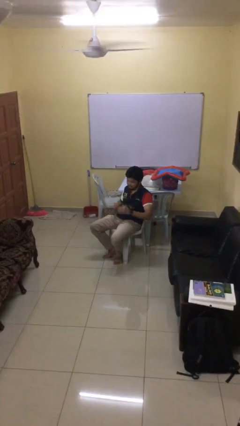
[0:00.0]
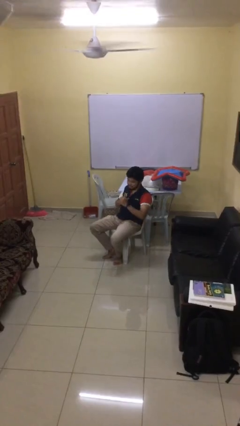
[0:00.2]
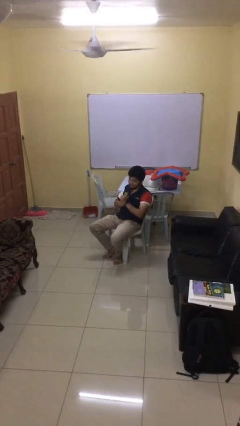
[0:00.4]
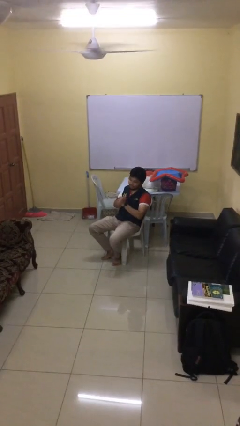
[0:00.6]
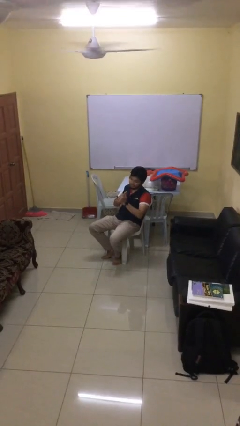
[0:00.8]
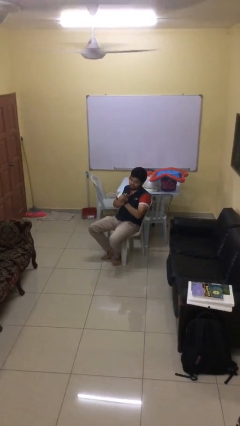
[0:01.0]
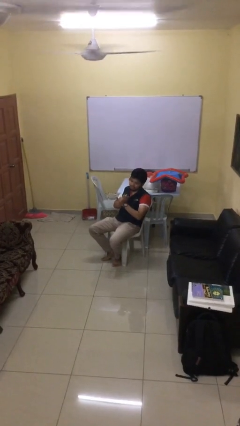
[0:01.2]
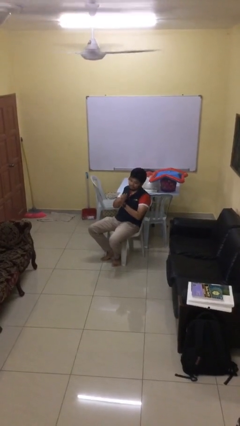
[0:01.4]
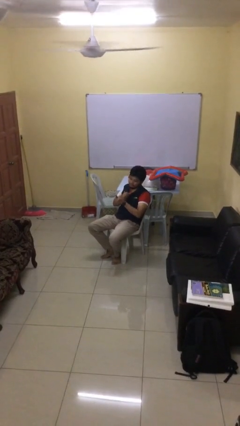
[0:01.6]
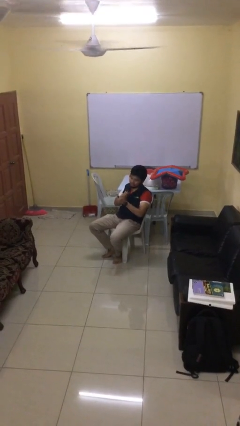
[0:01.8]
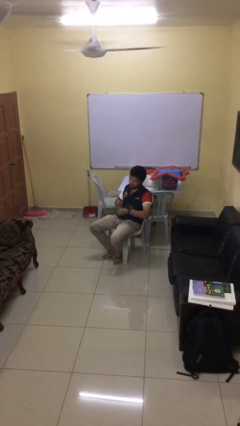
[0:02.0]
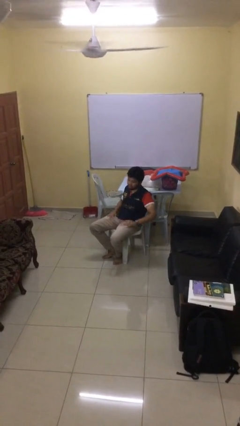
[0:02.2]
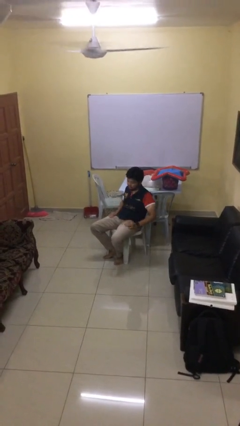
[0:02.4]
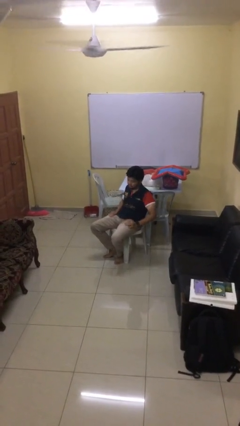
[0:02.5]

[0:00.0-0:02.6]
person cracks knuckles

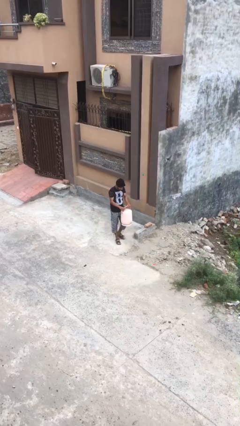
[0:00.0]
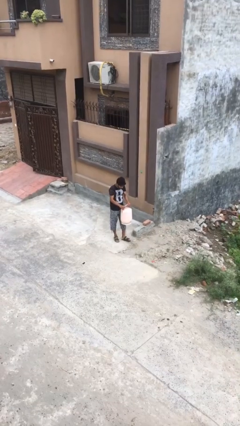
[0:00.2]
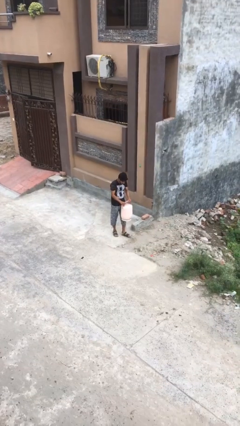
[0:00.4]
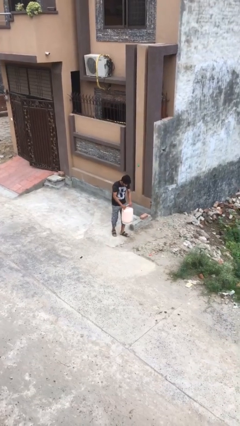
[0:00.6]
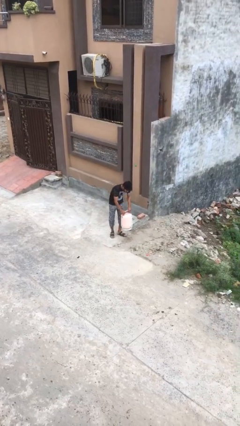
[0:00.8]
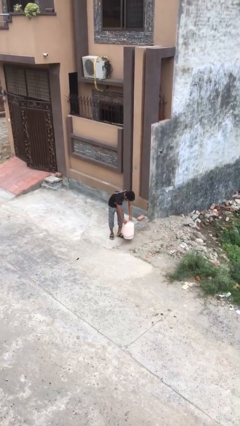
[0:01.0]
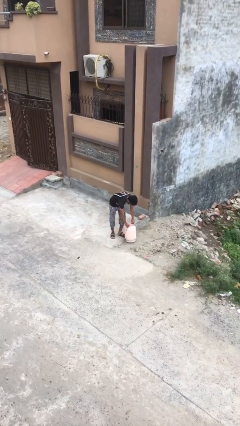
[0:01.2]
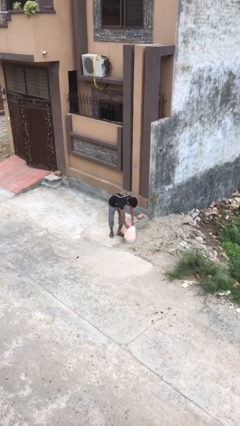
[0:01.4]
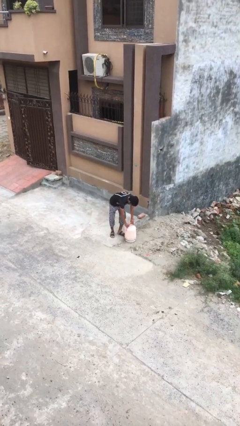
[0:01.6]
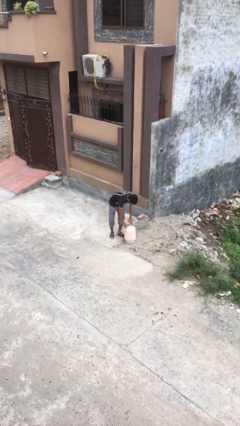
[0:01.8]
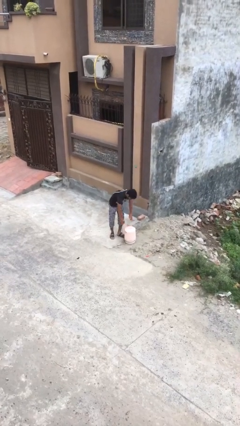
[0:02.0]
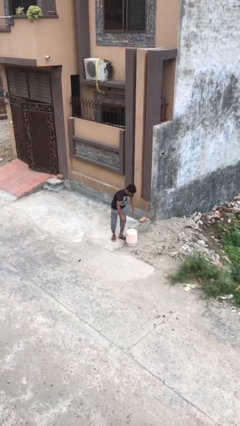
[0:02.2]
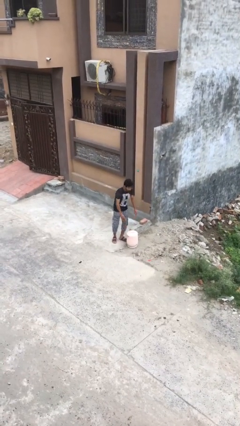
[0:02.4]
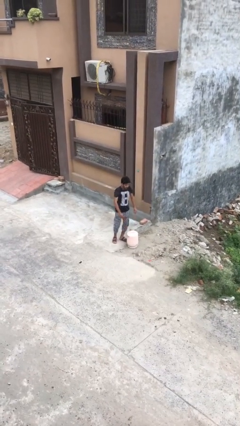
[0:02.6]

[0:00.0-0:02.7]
person puts down object on floor

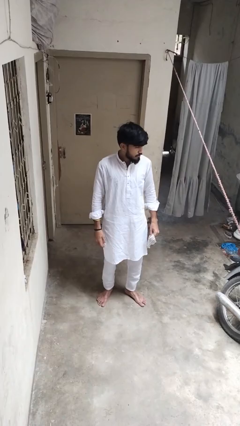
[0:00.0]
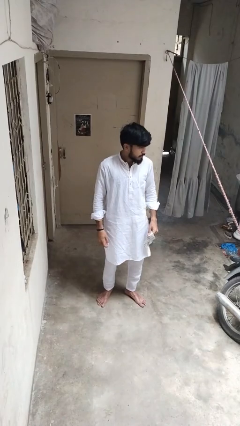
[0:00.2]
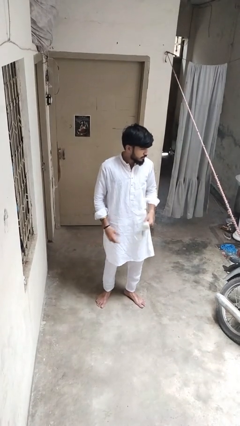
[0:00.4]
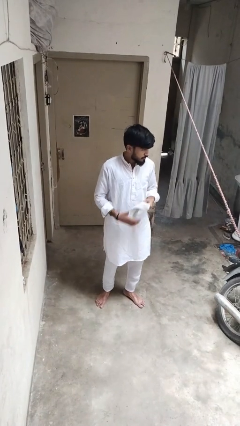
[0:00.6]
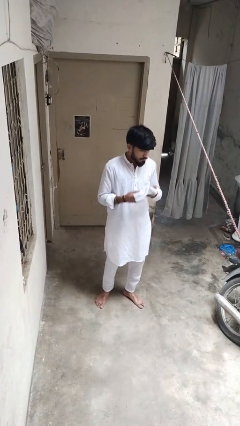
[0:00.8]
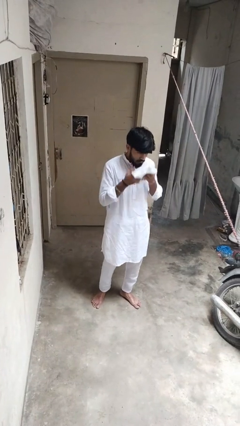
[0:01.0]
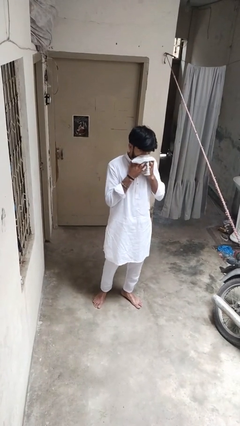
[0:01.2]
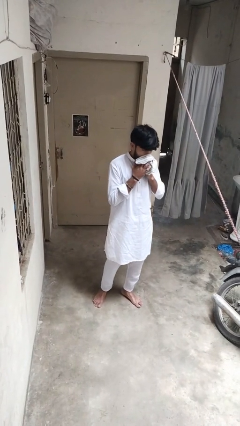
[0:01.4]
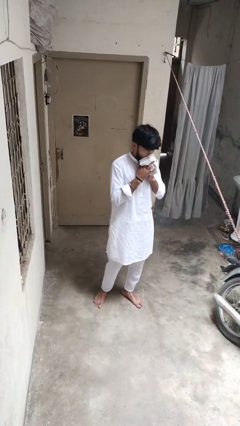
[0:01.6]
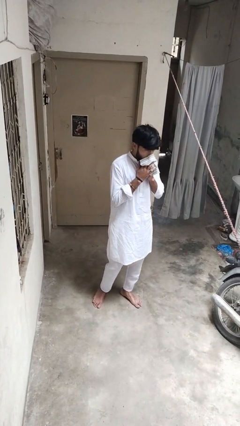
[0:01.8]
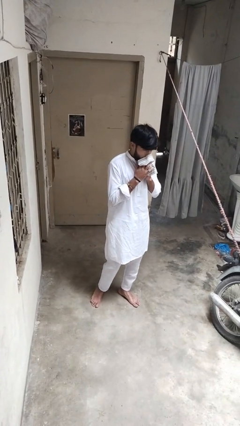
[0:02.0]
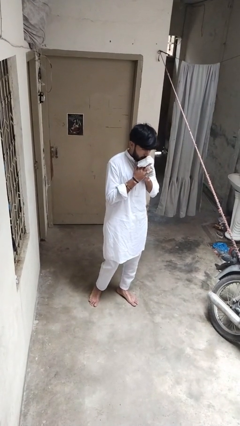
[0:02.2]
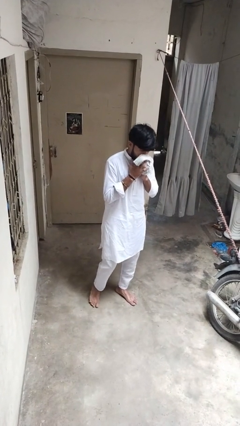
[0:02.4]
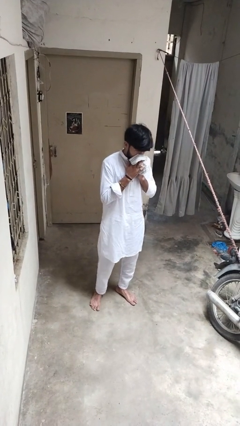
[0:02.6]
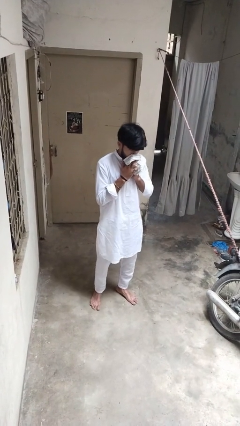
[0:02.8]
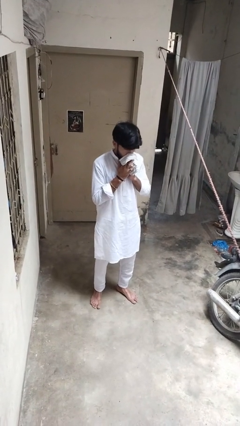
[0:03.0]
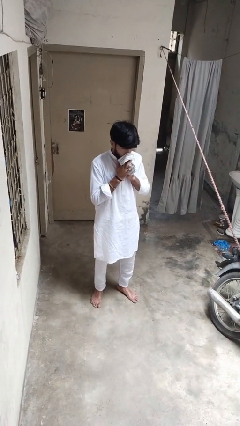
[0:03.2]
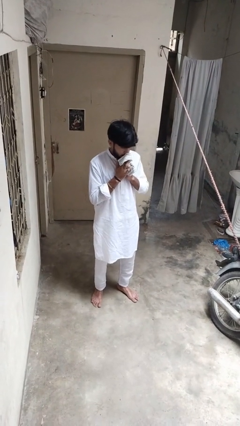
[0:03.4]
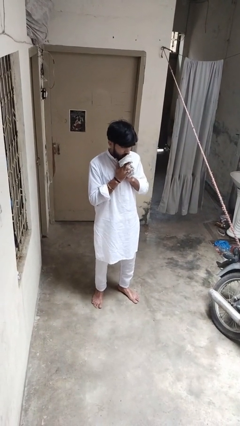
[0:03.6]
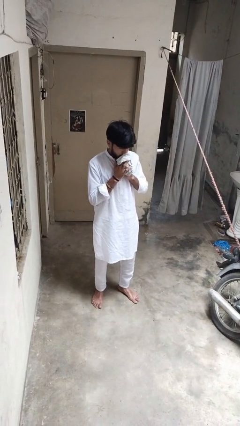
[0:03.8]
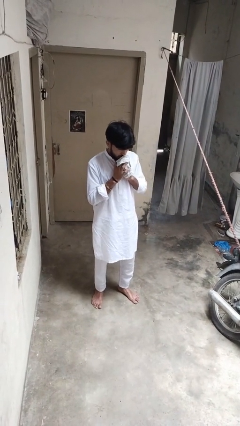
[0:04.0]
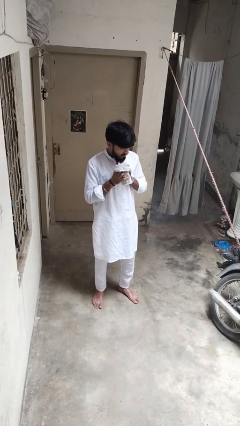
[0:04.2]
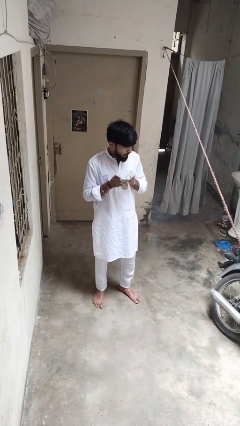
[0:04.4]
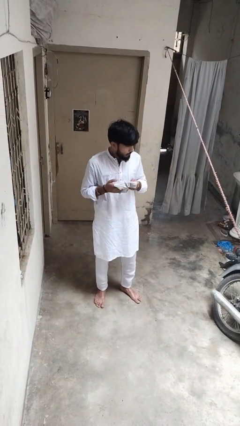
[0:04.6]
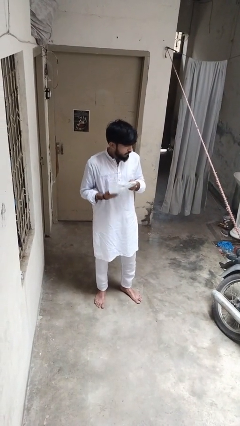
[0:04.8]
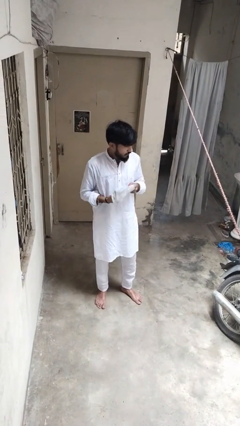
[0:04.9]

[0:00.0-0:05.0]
person blows nose

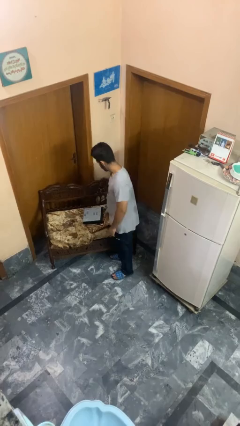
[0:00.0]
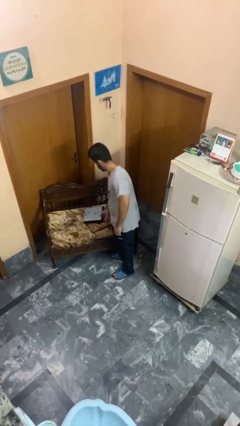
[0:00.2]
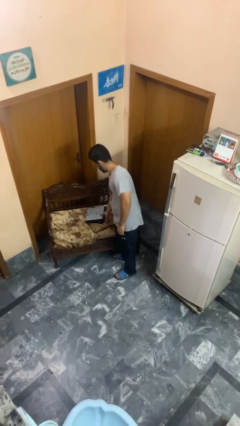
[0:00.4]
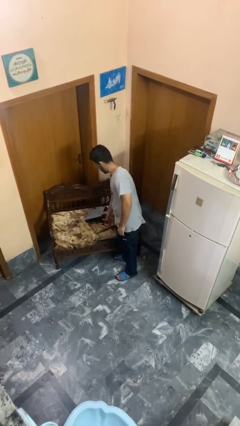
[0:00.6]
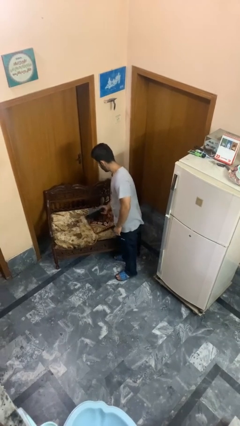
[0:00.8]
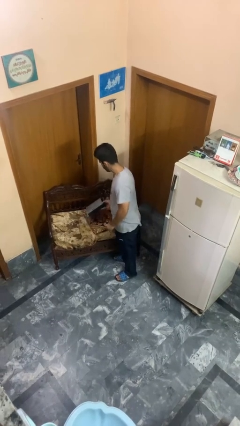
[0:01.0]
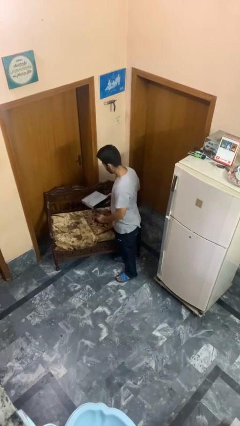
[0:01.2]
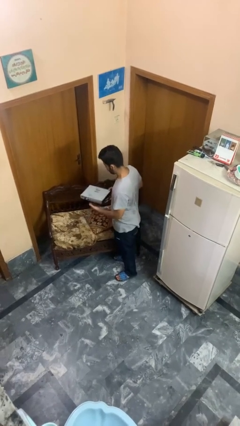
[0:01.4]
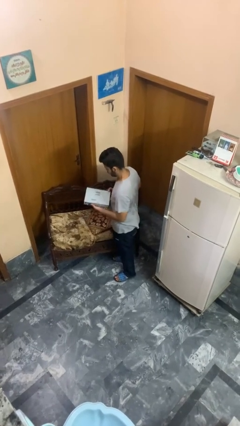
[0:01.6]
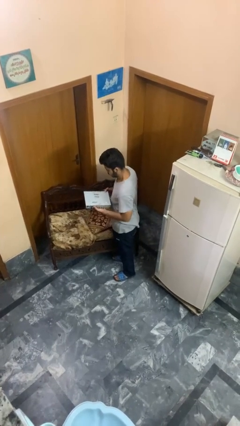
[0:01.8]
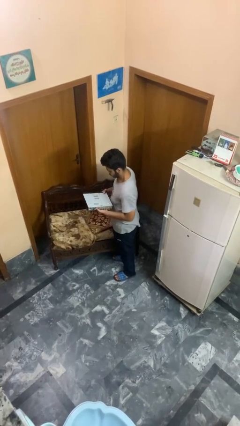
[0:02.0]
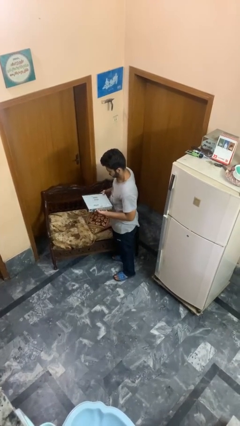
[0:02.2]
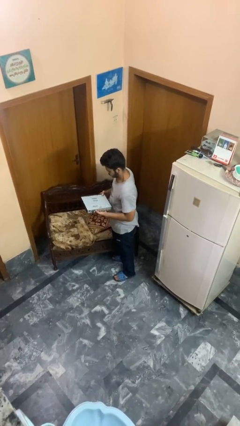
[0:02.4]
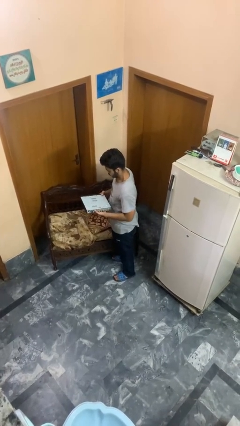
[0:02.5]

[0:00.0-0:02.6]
person picks up object from couch

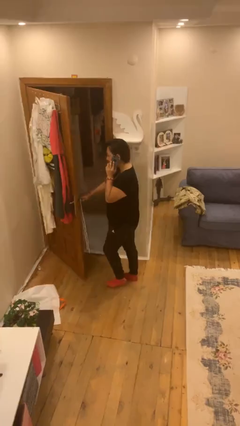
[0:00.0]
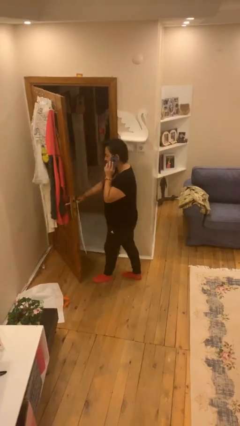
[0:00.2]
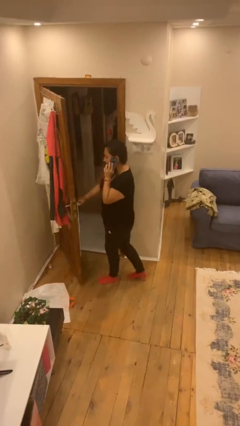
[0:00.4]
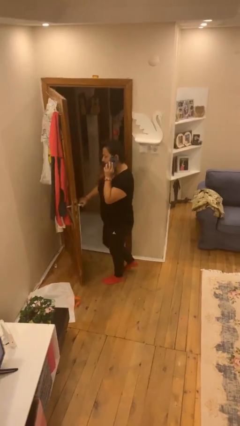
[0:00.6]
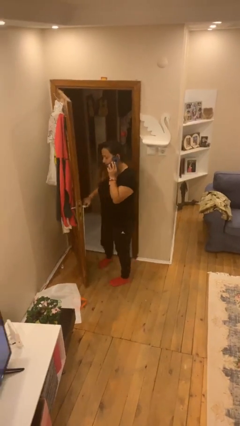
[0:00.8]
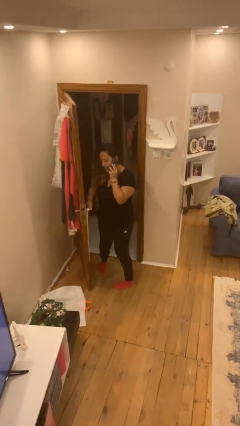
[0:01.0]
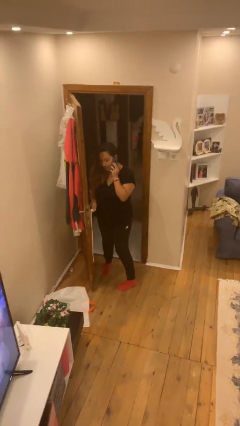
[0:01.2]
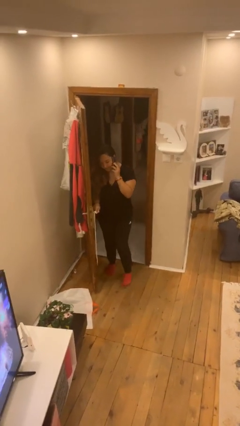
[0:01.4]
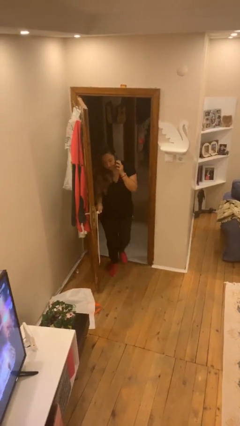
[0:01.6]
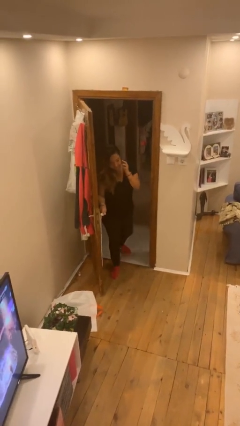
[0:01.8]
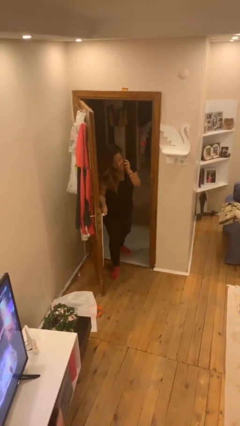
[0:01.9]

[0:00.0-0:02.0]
person exits scene through structure

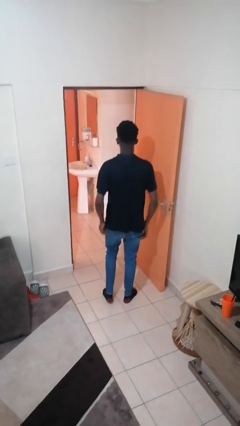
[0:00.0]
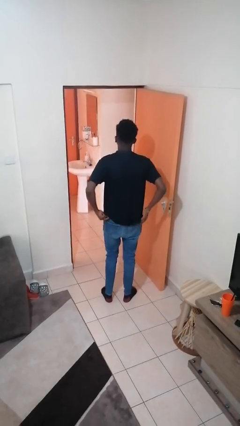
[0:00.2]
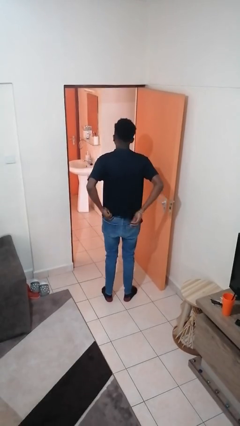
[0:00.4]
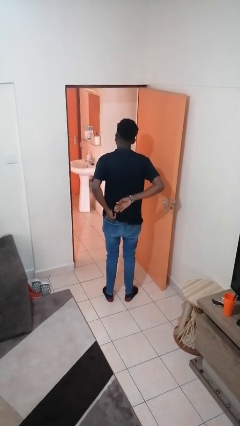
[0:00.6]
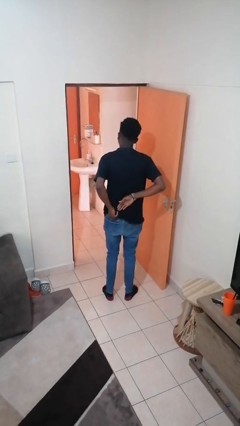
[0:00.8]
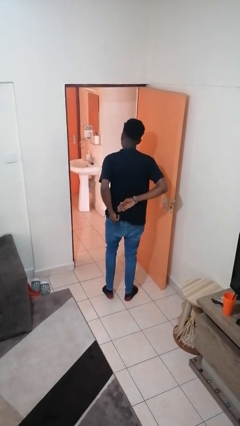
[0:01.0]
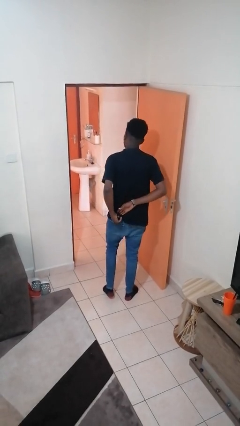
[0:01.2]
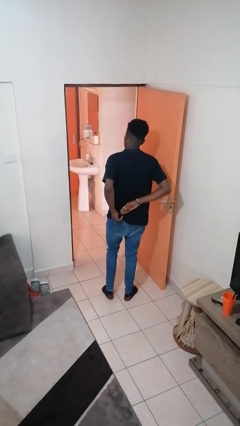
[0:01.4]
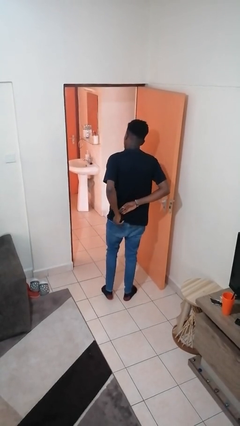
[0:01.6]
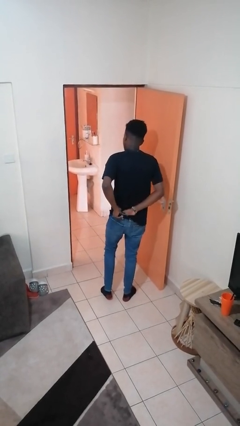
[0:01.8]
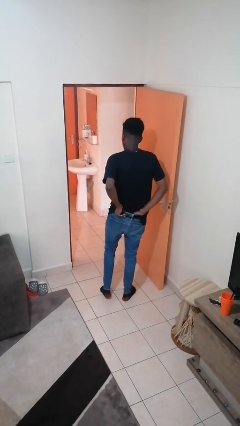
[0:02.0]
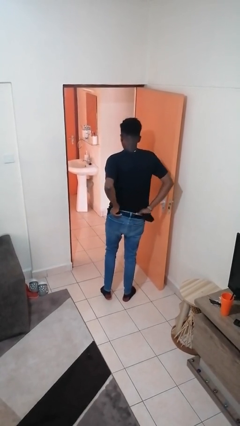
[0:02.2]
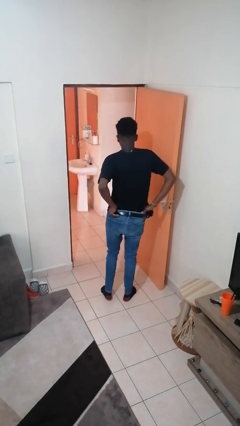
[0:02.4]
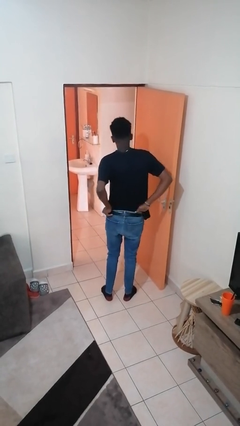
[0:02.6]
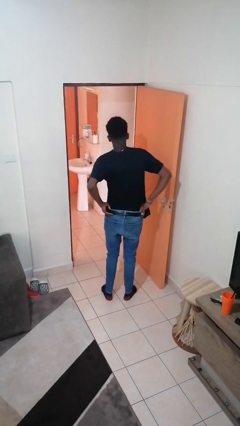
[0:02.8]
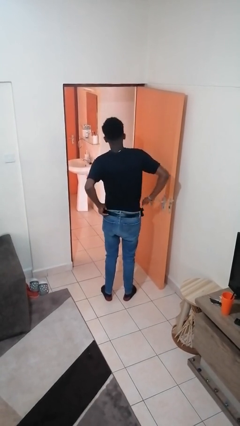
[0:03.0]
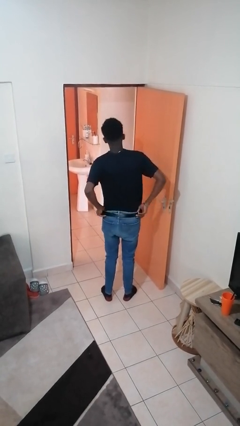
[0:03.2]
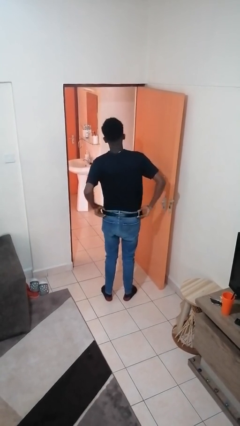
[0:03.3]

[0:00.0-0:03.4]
person tucks in shirt
